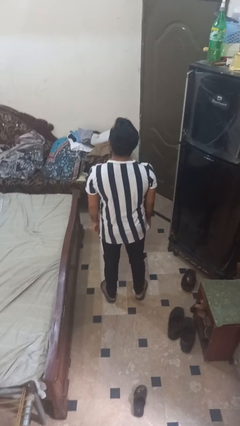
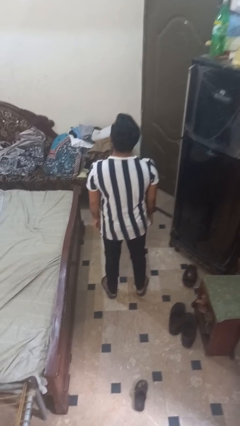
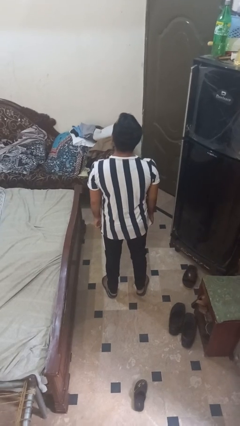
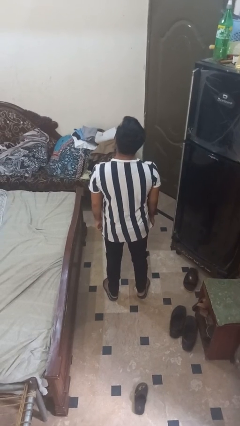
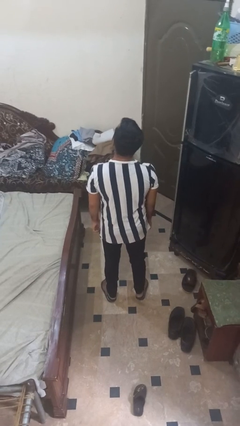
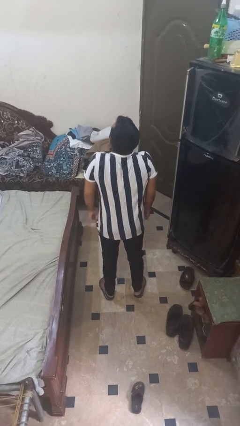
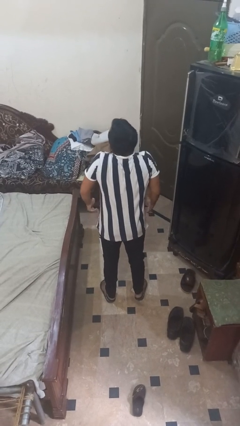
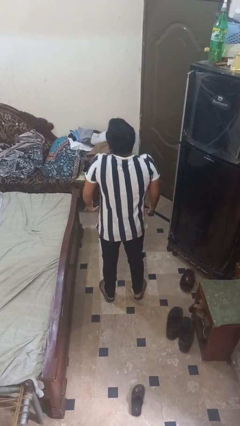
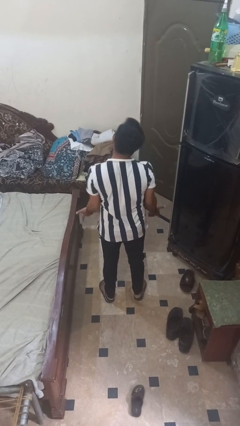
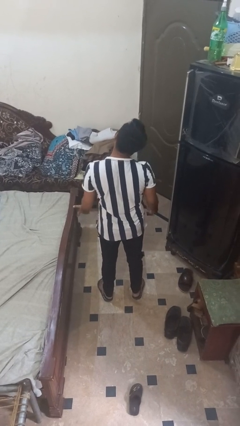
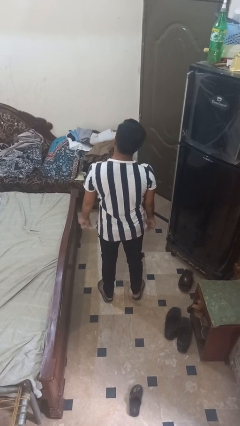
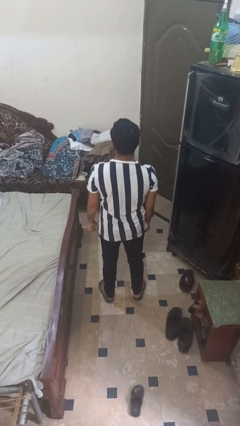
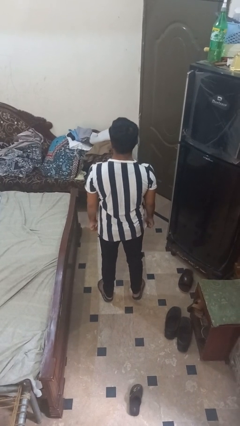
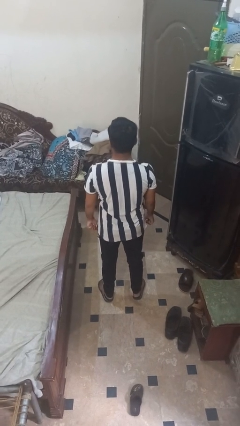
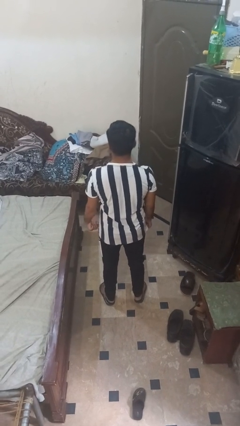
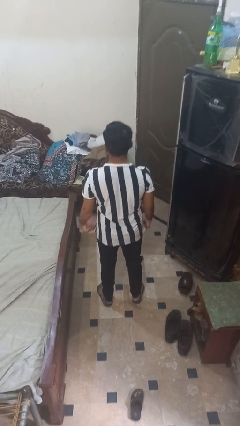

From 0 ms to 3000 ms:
person shrugs

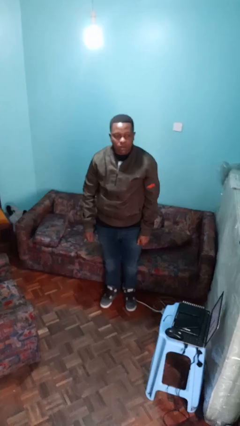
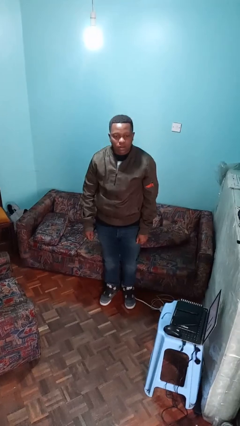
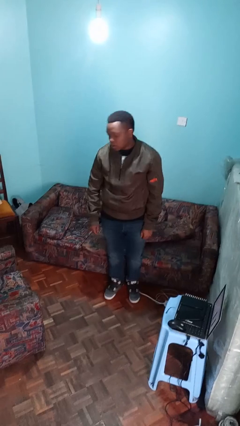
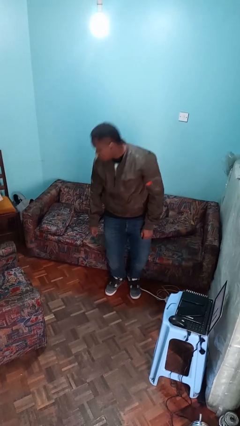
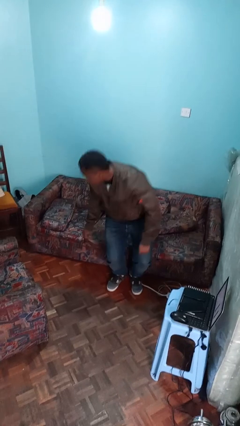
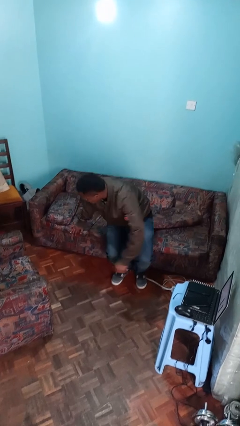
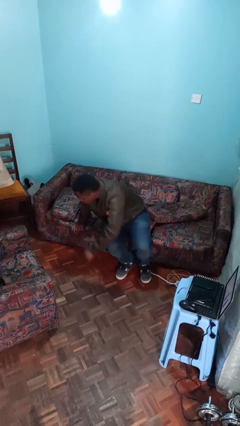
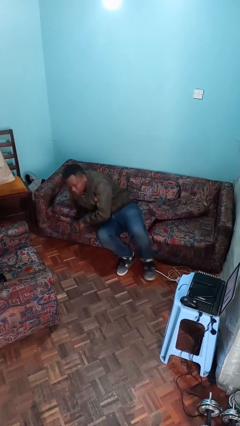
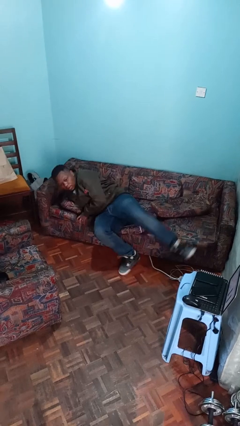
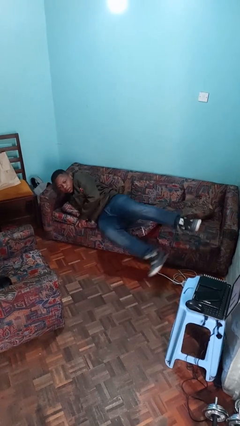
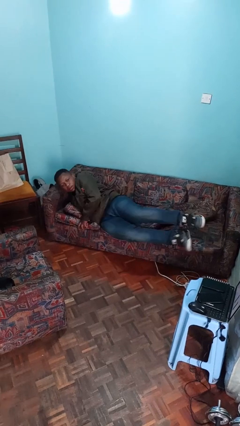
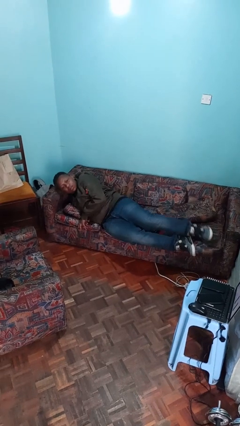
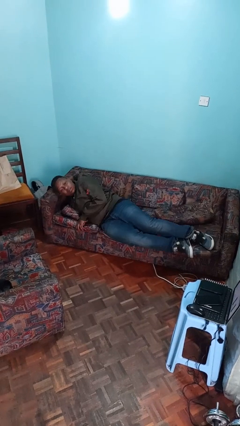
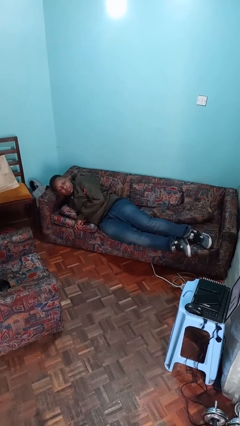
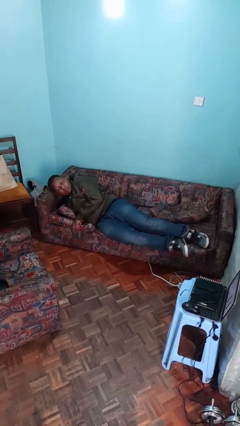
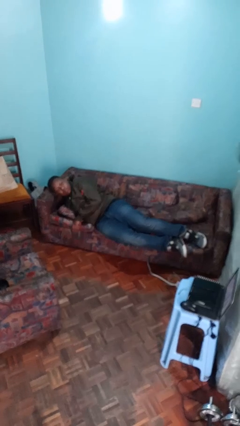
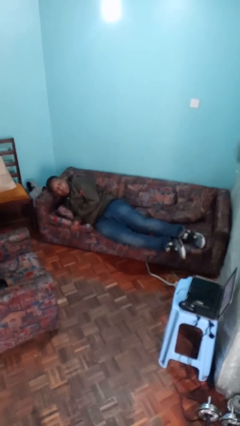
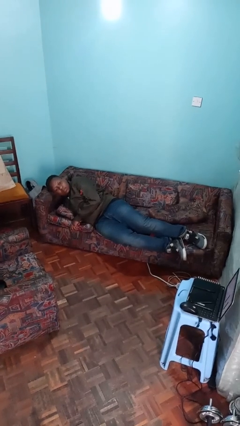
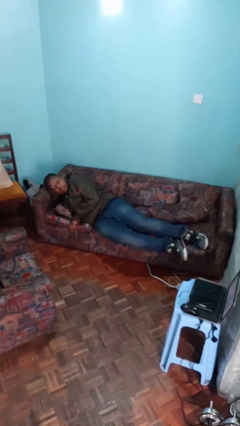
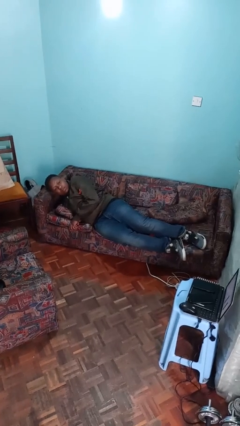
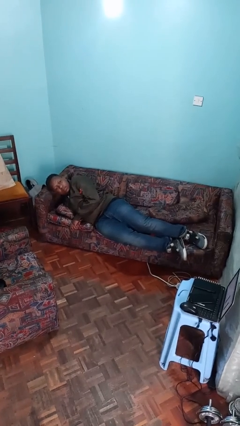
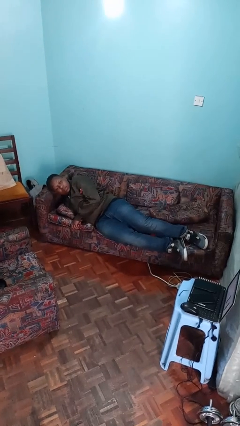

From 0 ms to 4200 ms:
person lies down on couch

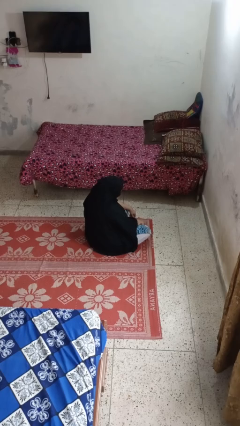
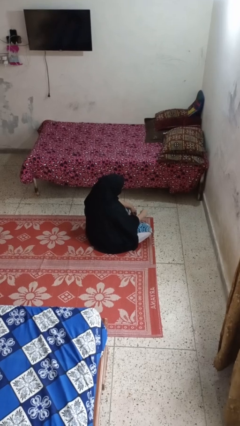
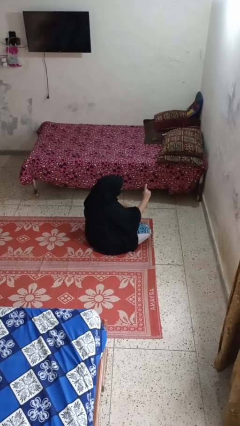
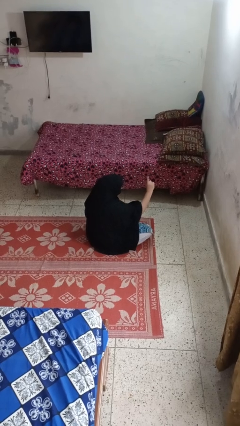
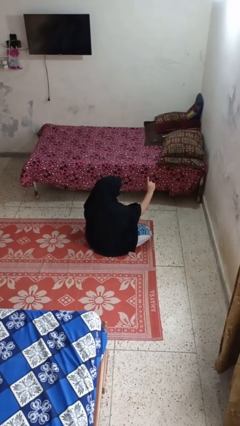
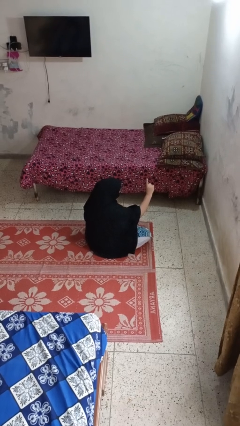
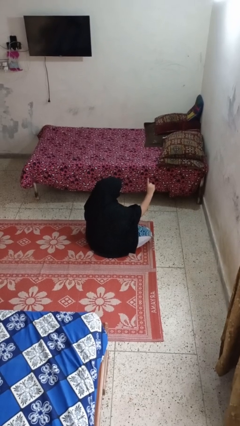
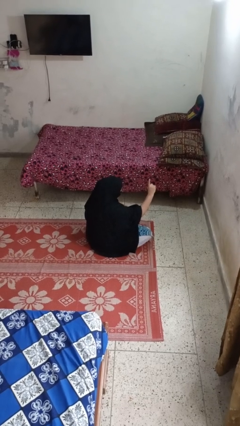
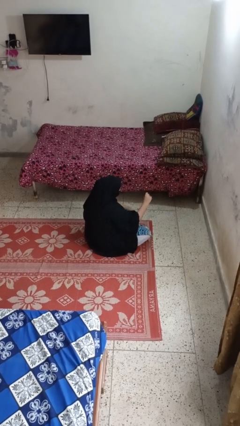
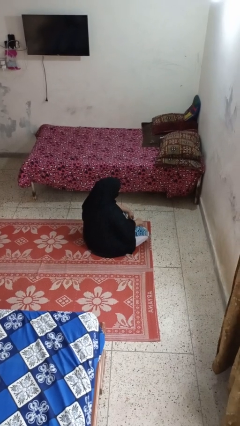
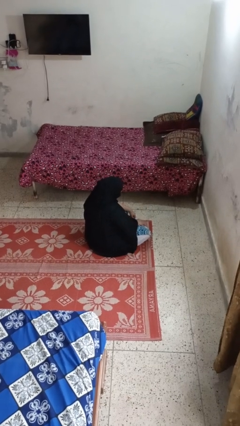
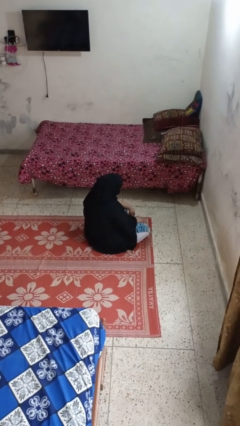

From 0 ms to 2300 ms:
person gestures number one

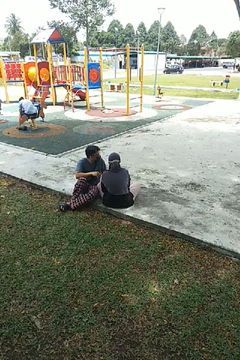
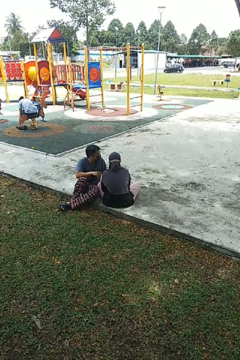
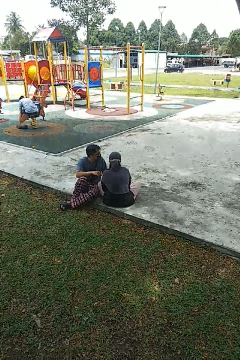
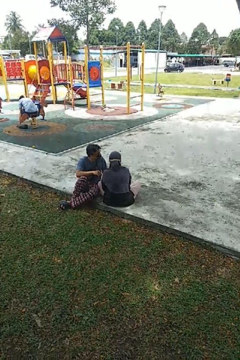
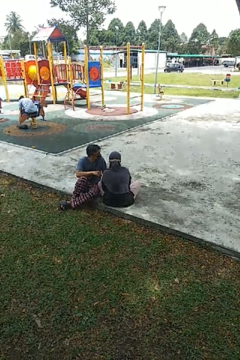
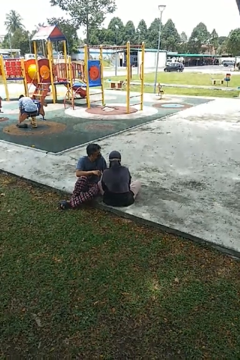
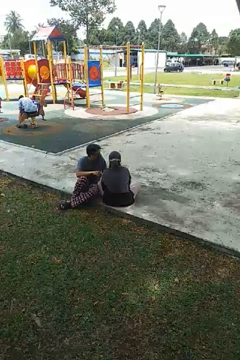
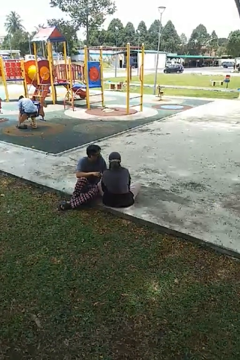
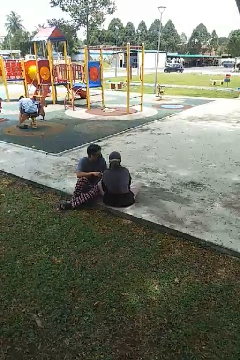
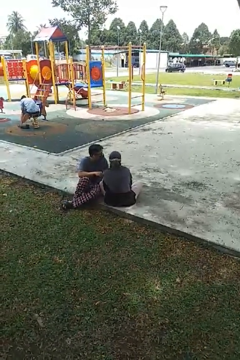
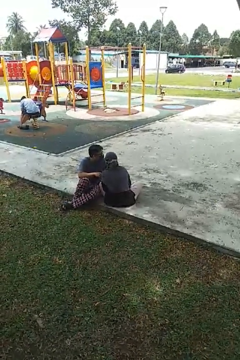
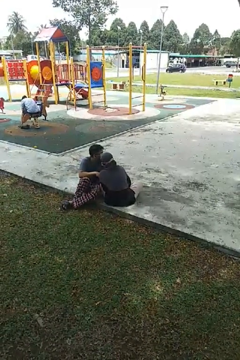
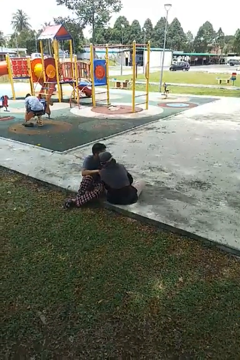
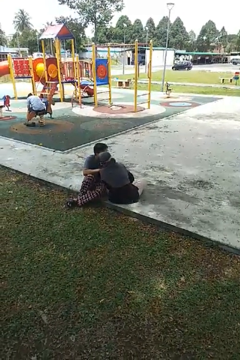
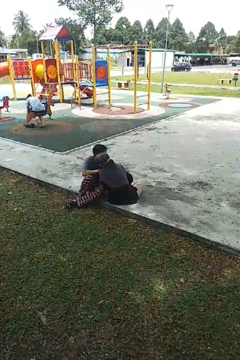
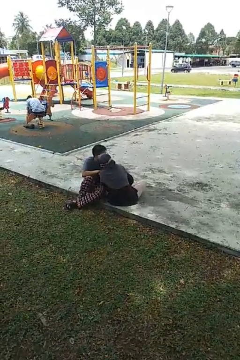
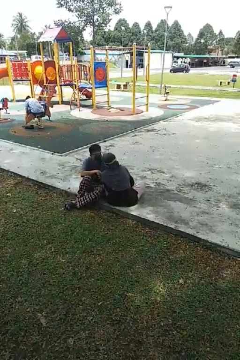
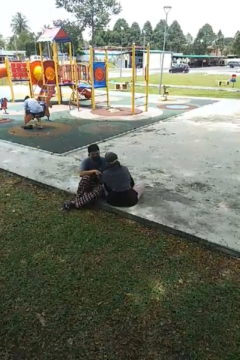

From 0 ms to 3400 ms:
person kisses cheek of person

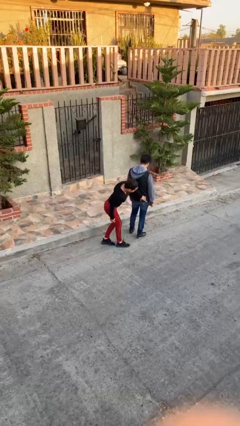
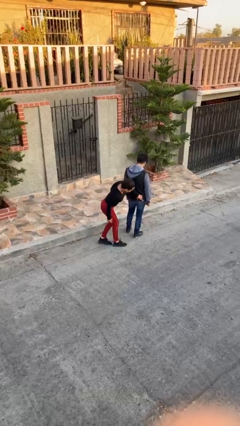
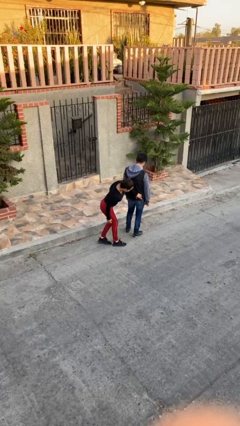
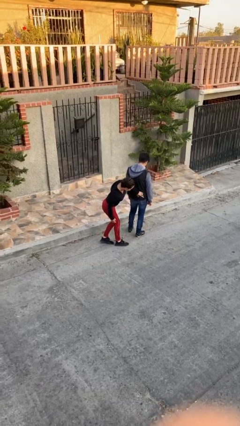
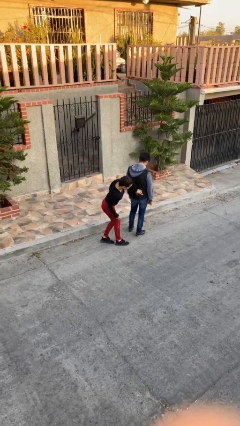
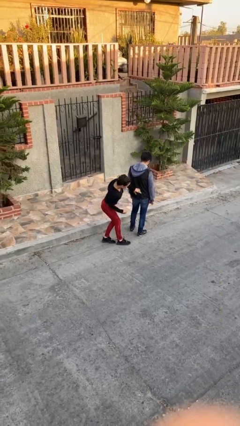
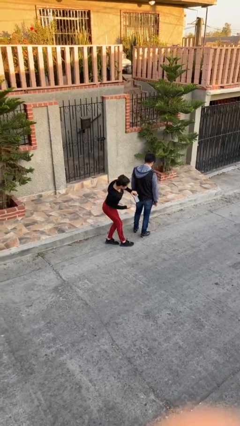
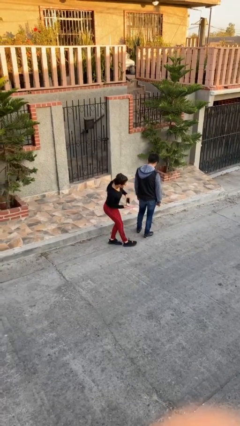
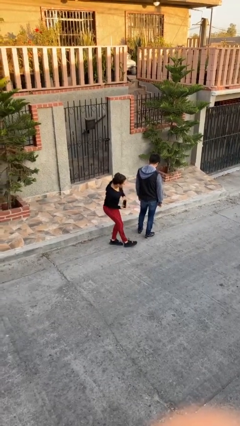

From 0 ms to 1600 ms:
person steals object from person

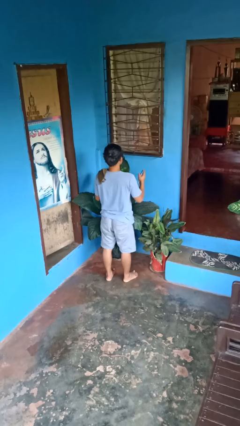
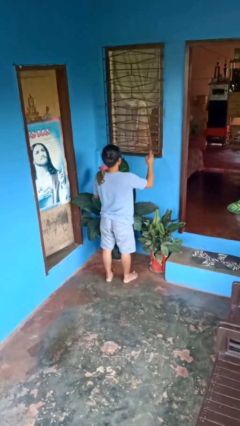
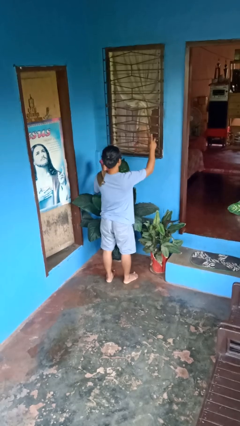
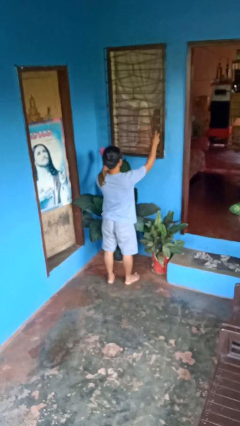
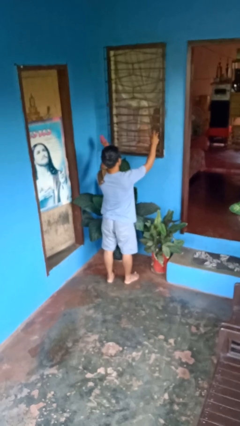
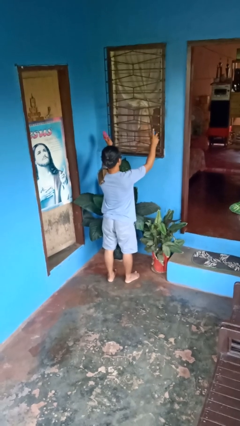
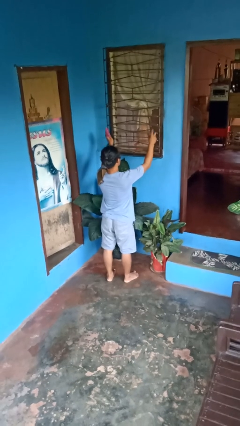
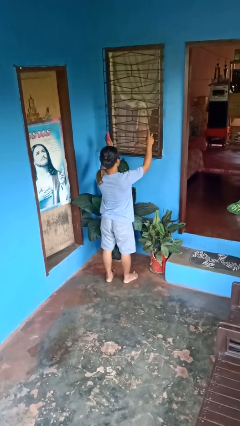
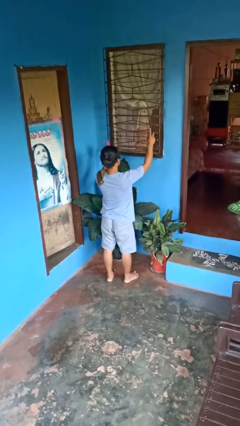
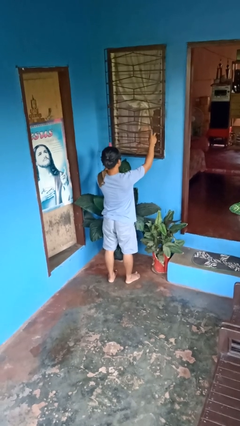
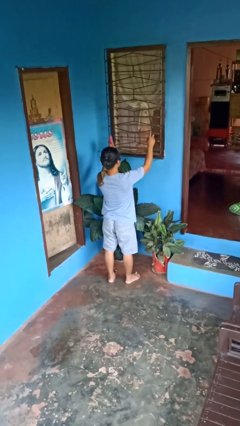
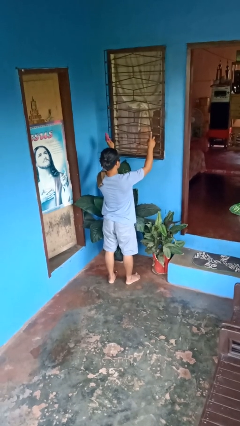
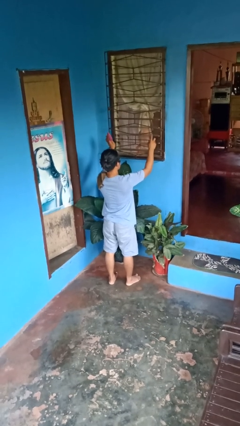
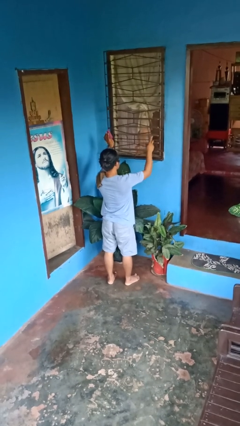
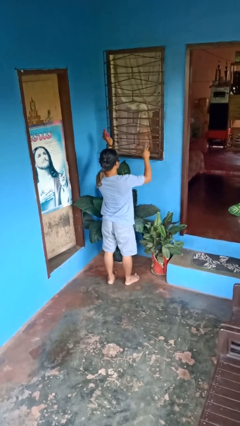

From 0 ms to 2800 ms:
person sprays from bottle

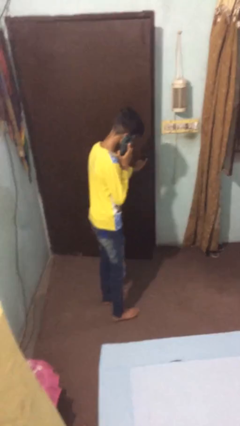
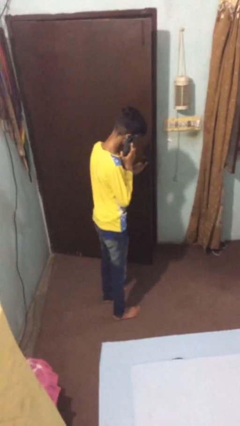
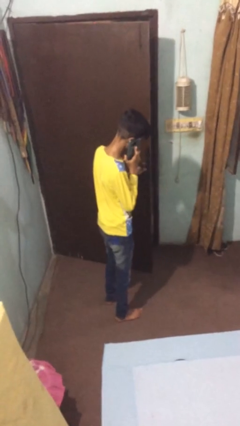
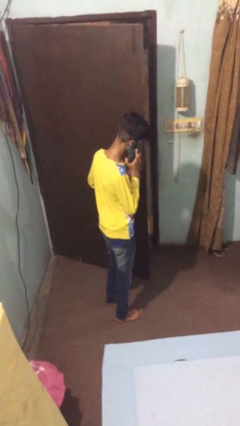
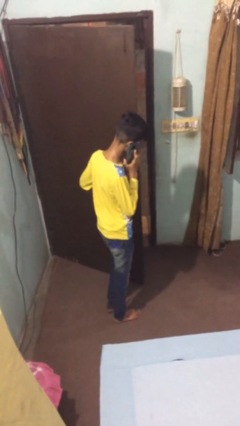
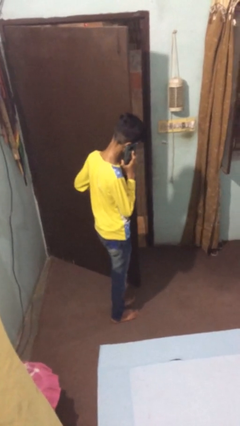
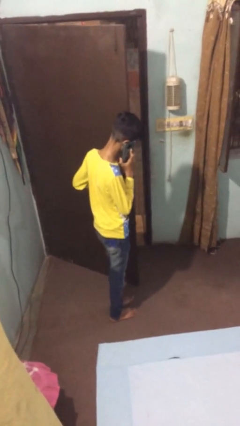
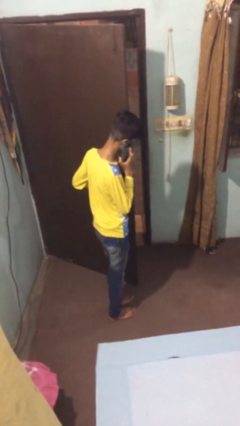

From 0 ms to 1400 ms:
person opens facility door
